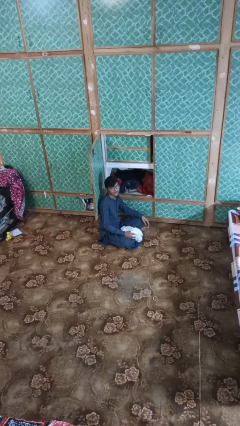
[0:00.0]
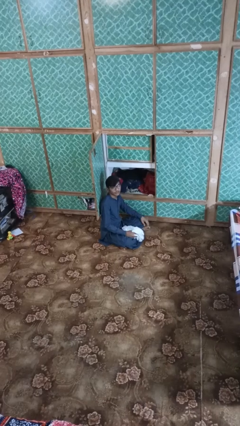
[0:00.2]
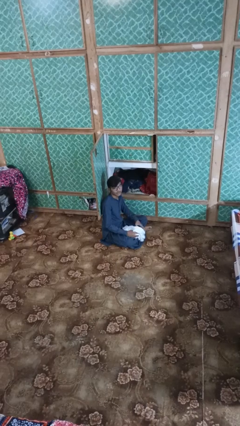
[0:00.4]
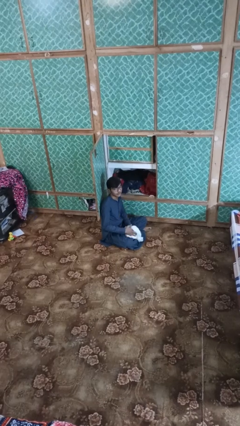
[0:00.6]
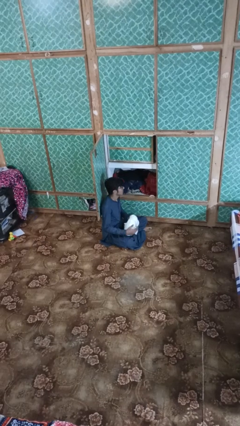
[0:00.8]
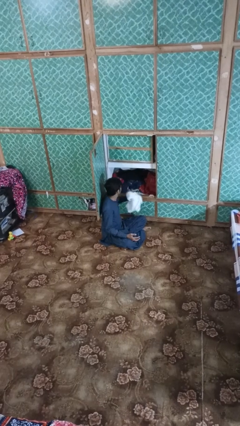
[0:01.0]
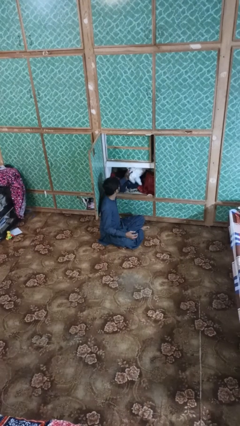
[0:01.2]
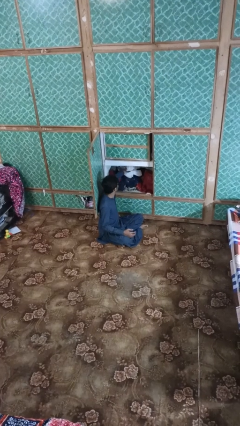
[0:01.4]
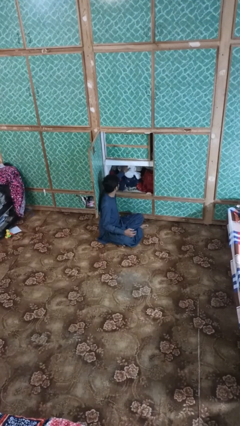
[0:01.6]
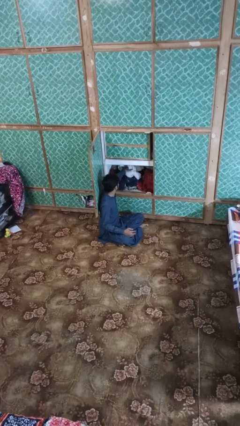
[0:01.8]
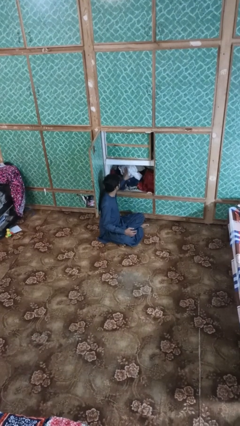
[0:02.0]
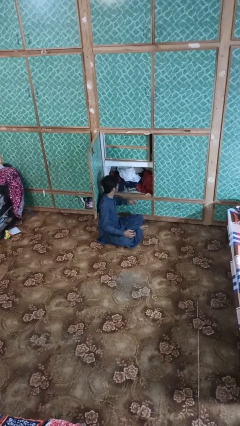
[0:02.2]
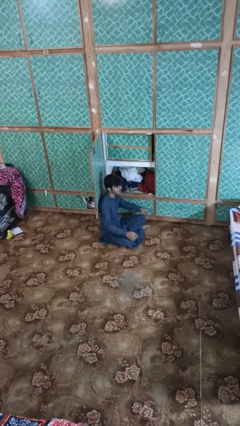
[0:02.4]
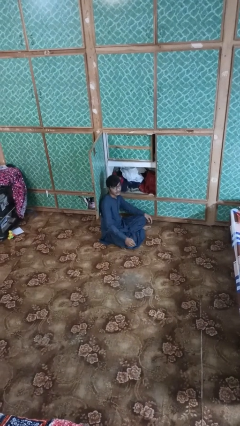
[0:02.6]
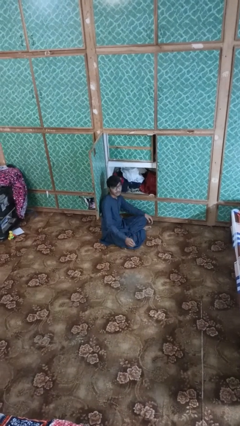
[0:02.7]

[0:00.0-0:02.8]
person puts clothes into dresser

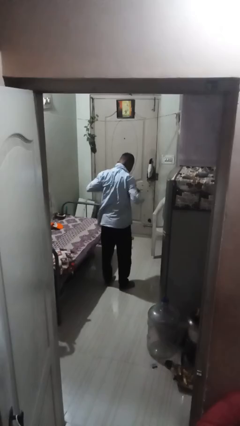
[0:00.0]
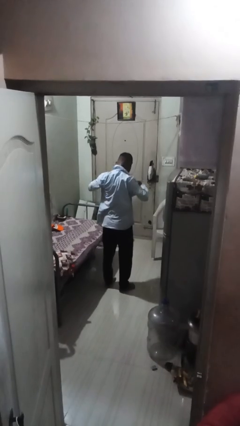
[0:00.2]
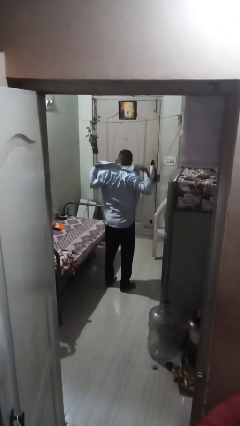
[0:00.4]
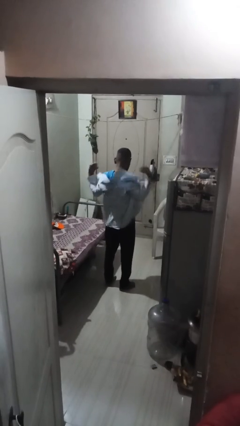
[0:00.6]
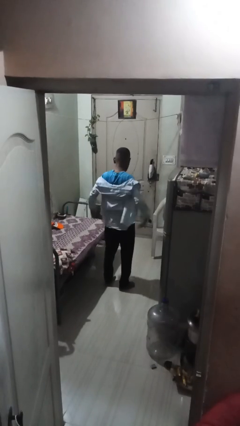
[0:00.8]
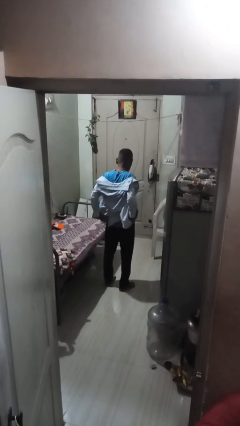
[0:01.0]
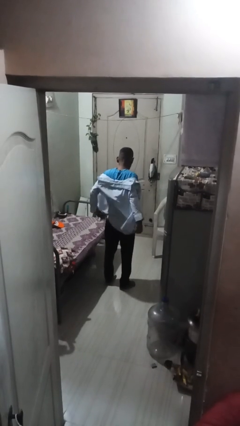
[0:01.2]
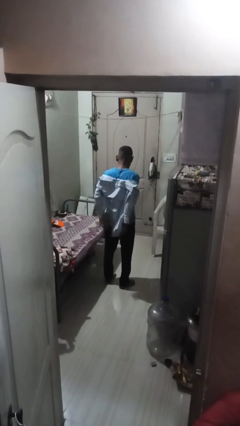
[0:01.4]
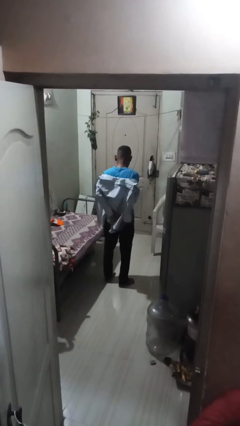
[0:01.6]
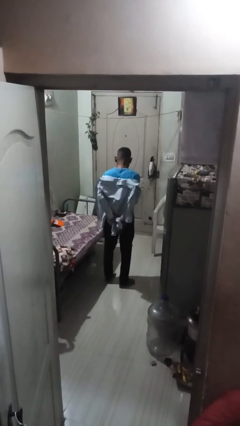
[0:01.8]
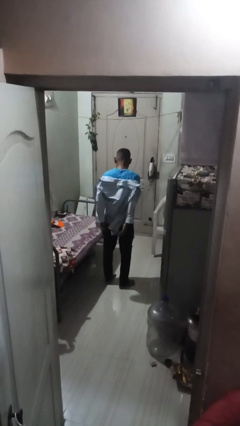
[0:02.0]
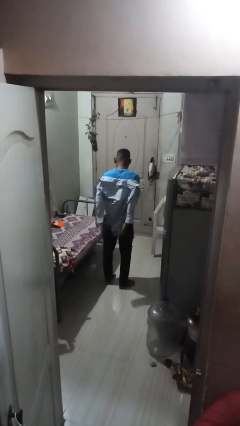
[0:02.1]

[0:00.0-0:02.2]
person takes off shirt

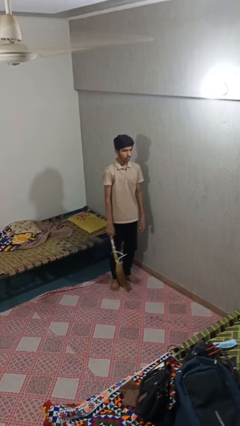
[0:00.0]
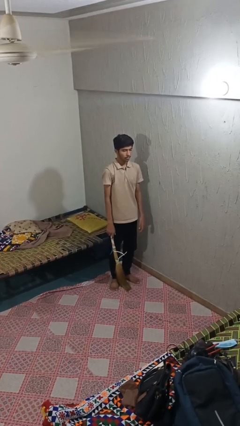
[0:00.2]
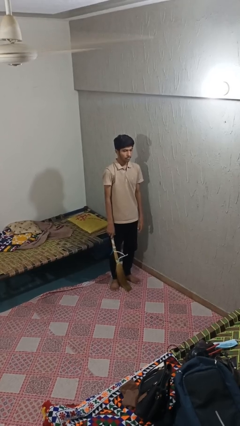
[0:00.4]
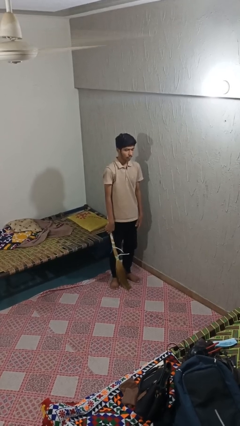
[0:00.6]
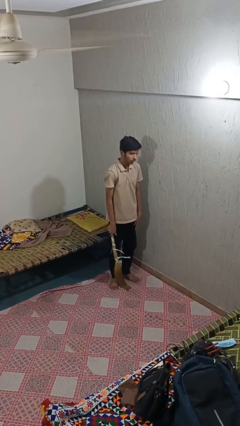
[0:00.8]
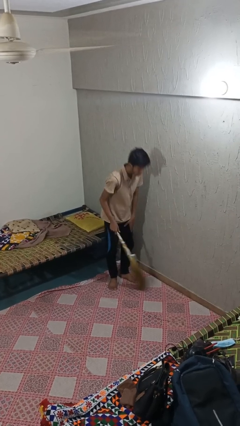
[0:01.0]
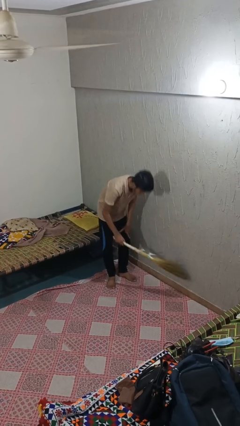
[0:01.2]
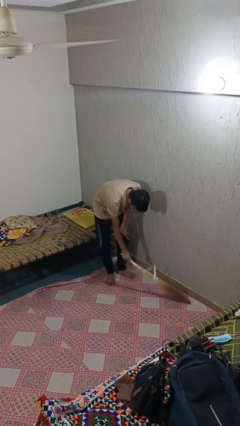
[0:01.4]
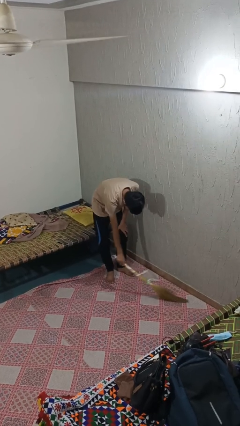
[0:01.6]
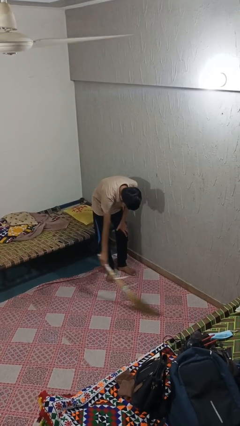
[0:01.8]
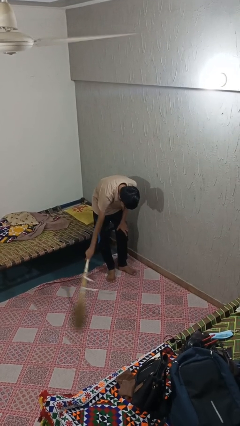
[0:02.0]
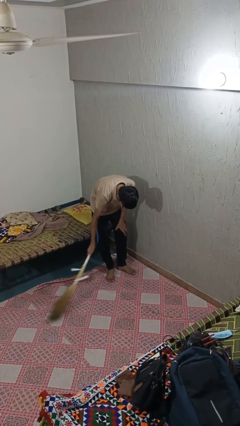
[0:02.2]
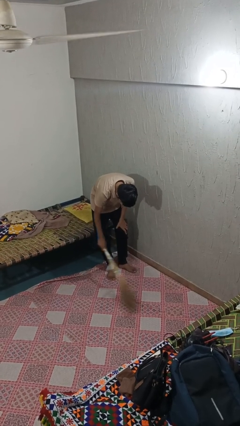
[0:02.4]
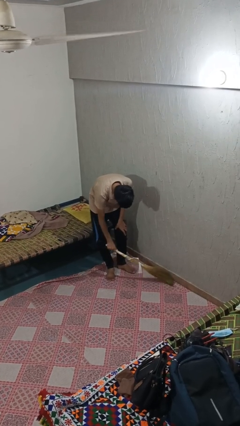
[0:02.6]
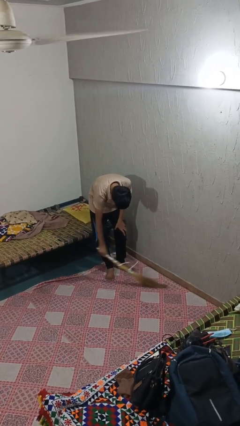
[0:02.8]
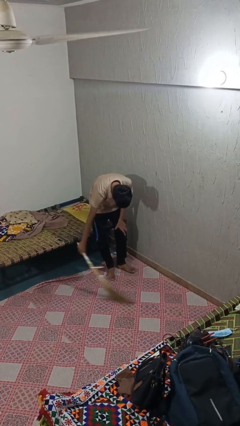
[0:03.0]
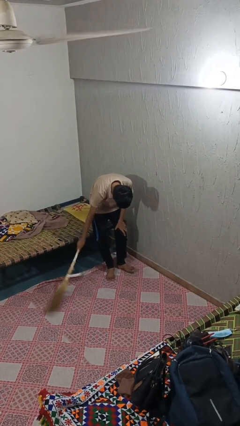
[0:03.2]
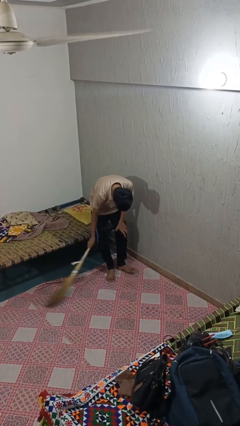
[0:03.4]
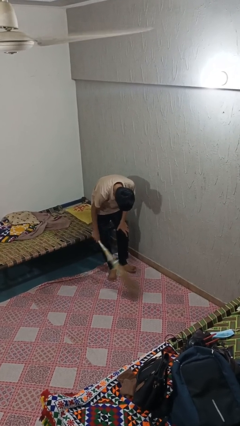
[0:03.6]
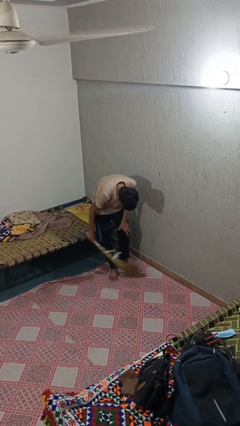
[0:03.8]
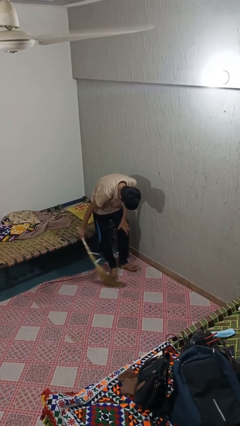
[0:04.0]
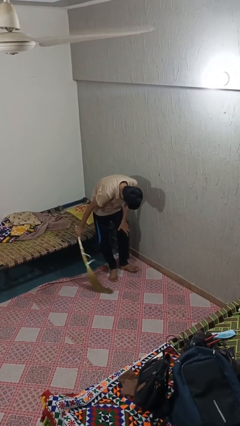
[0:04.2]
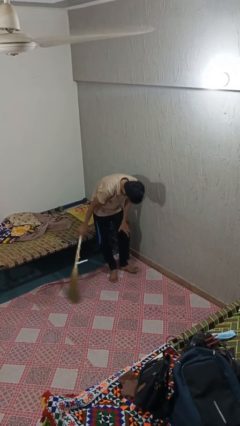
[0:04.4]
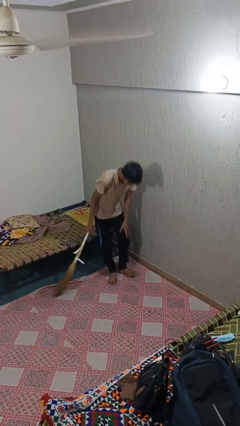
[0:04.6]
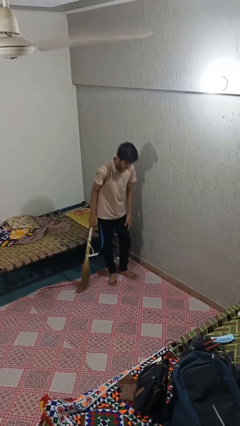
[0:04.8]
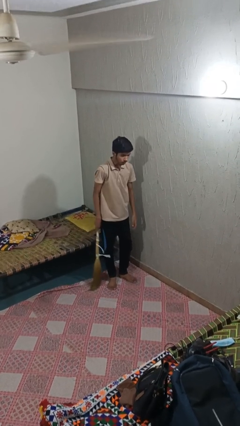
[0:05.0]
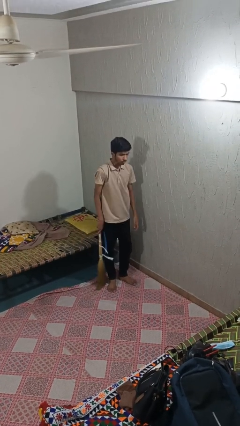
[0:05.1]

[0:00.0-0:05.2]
person sweeps floor

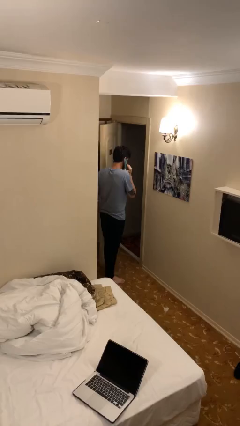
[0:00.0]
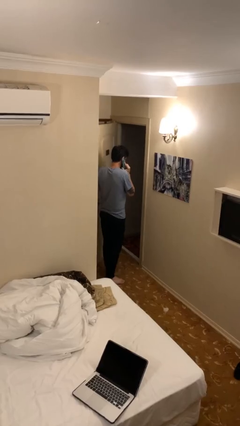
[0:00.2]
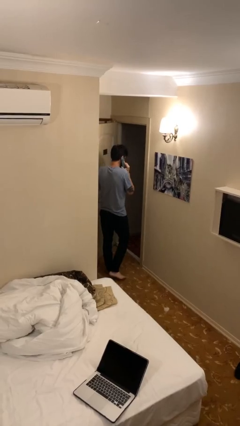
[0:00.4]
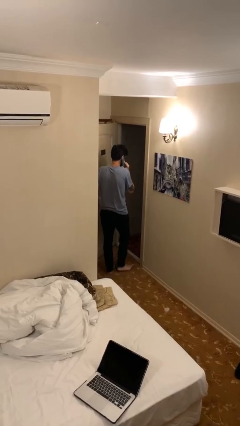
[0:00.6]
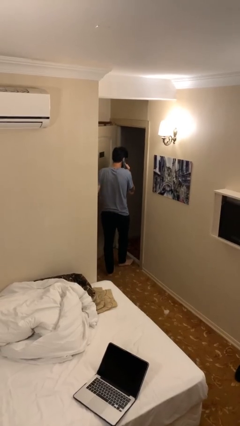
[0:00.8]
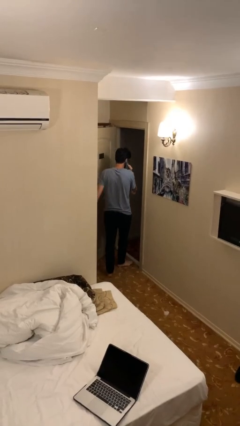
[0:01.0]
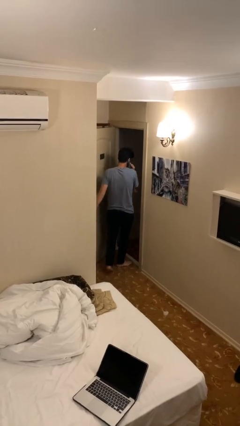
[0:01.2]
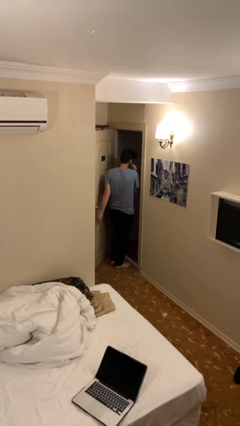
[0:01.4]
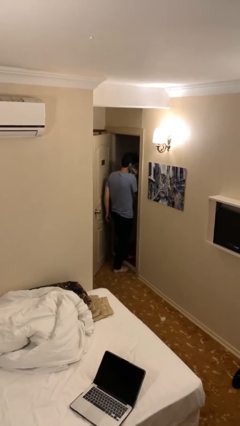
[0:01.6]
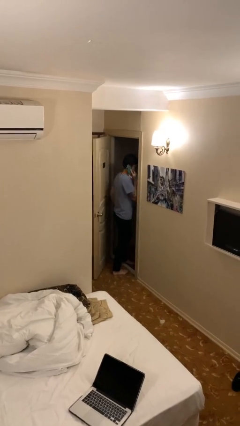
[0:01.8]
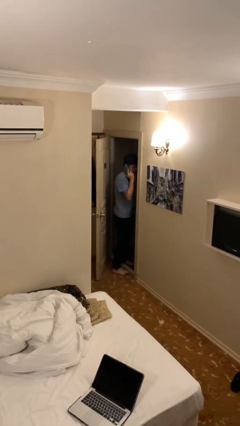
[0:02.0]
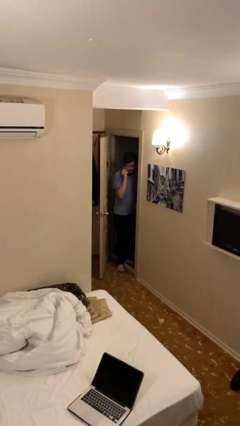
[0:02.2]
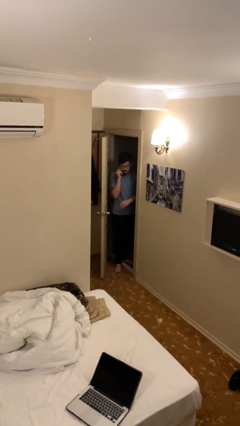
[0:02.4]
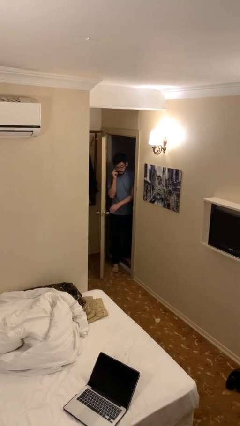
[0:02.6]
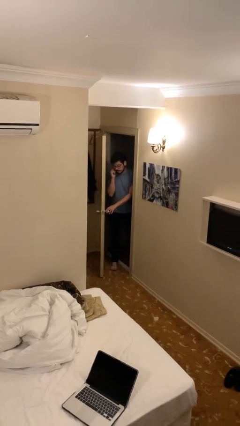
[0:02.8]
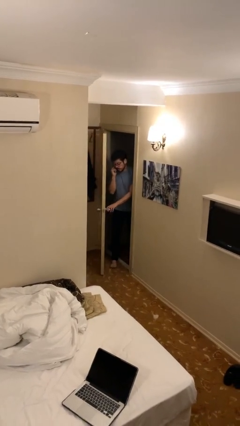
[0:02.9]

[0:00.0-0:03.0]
person exits scene through structure

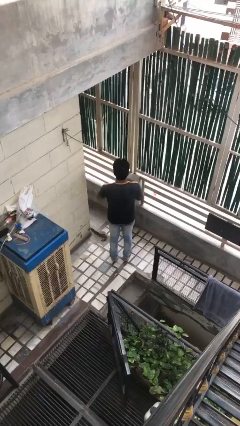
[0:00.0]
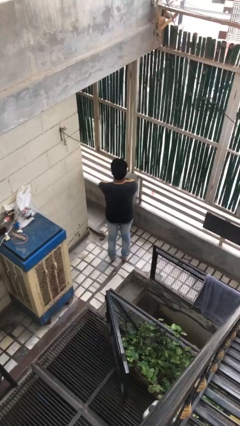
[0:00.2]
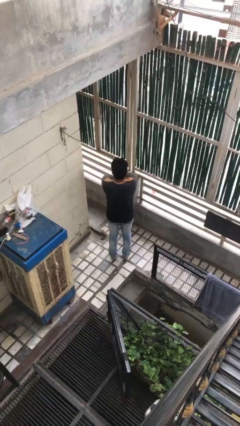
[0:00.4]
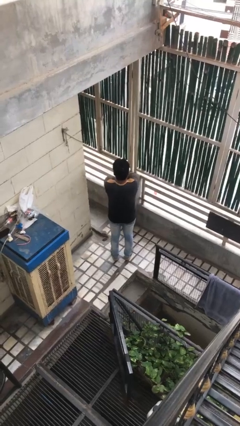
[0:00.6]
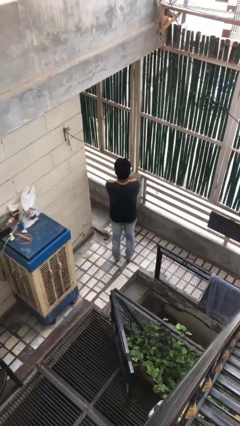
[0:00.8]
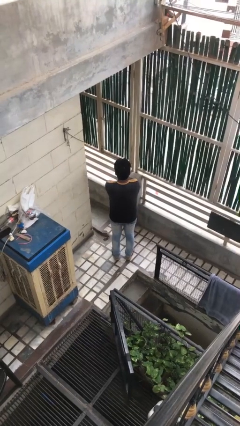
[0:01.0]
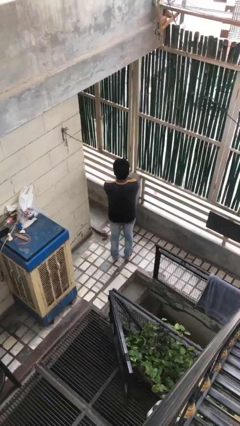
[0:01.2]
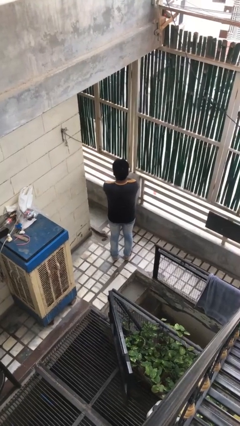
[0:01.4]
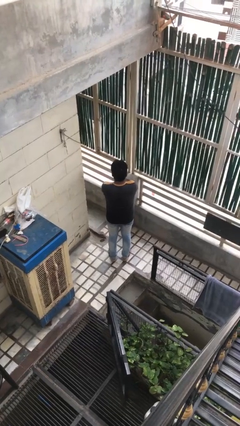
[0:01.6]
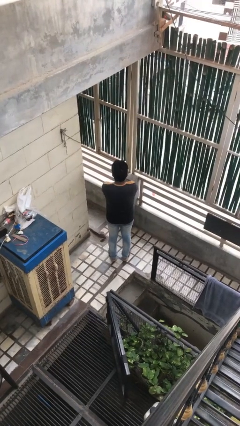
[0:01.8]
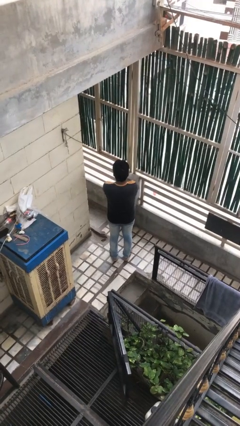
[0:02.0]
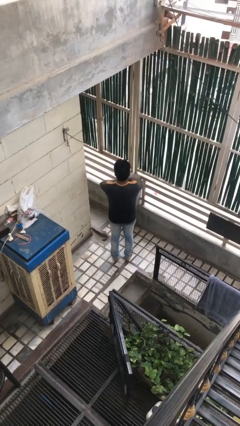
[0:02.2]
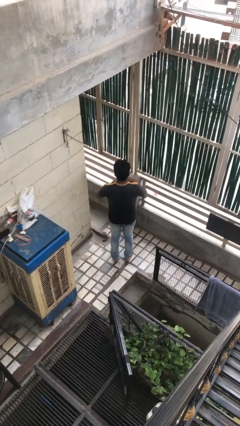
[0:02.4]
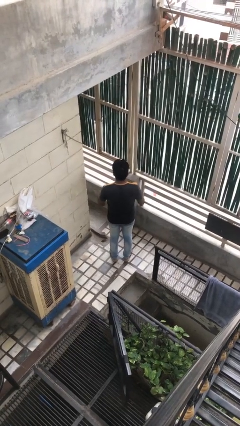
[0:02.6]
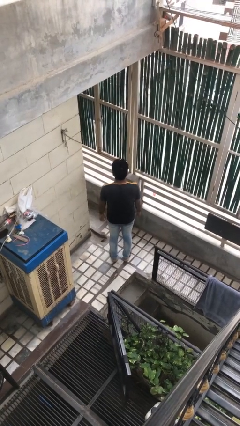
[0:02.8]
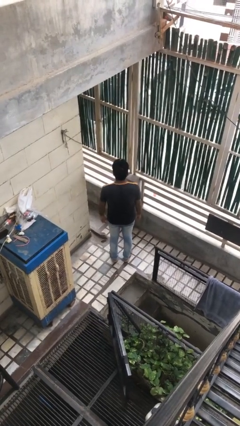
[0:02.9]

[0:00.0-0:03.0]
person crosses arms

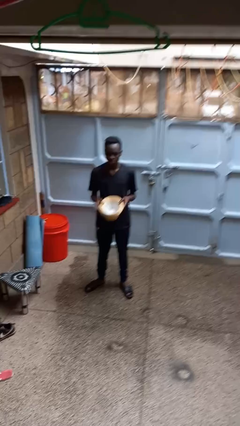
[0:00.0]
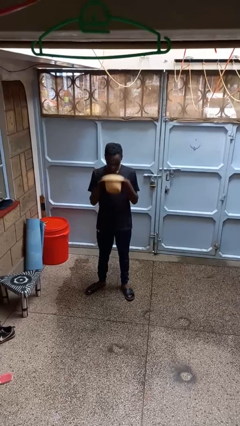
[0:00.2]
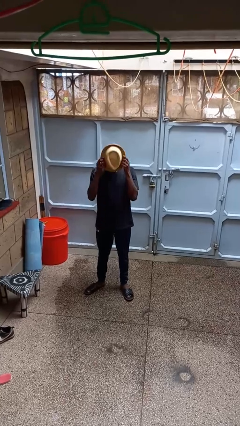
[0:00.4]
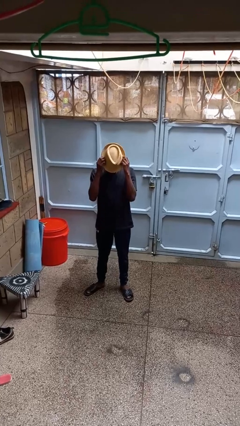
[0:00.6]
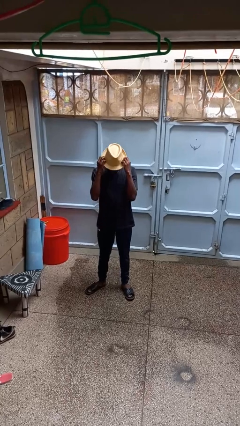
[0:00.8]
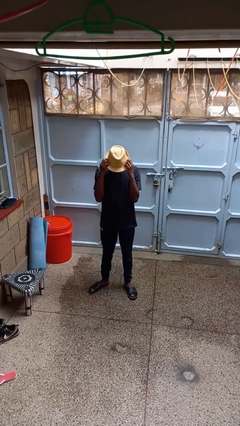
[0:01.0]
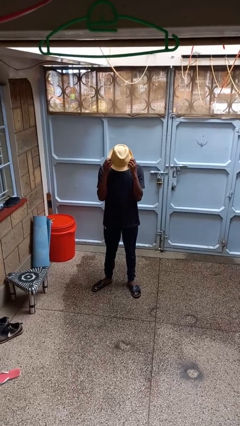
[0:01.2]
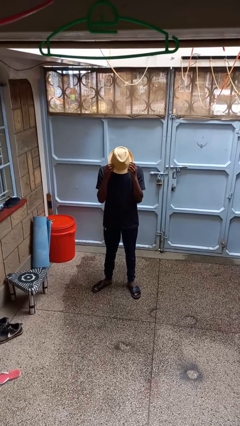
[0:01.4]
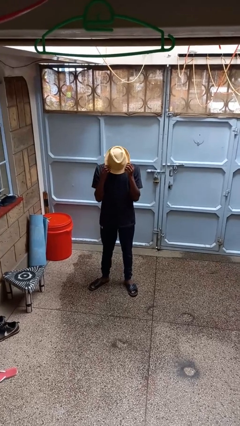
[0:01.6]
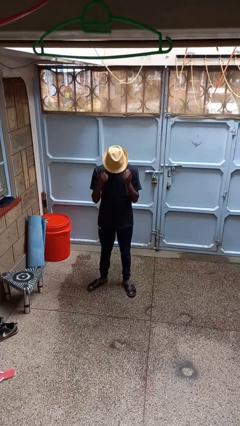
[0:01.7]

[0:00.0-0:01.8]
person puts on hat
